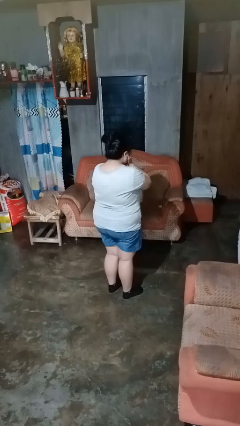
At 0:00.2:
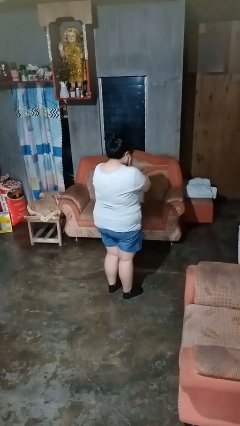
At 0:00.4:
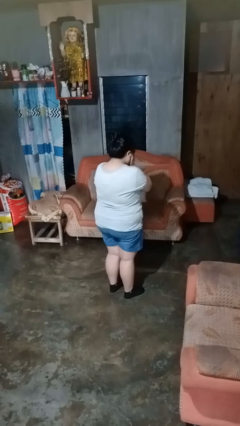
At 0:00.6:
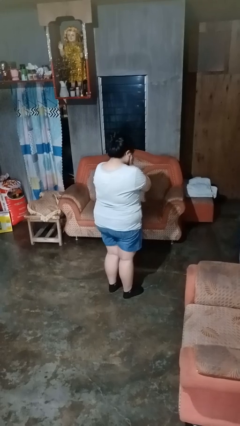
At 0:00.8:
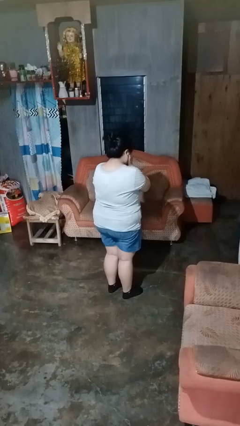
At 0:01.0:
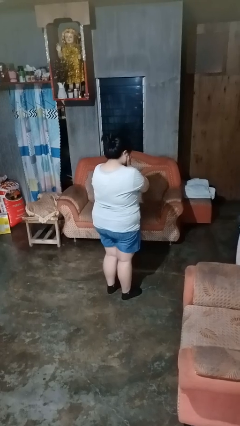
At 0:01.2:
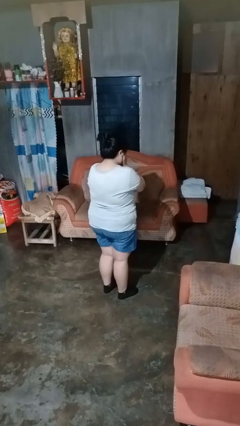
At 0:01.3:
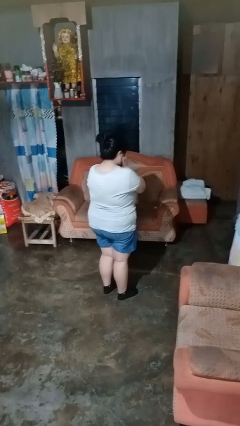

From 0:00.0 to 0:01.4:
person covers face with hands

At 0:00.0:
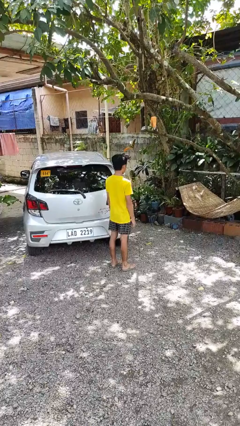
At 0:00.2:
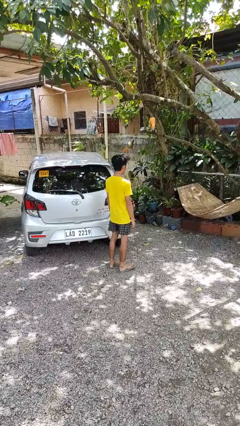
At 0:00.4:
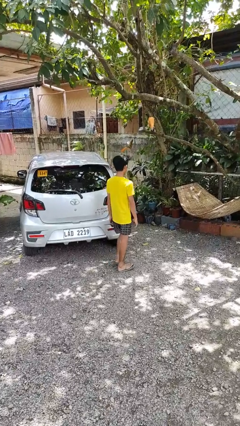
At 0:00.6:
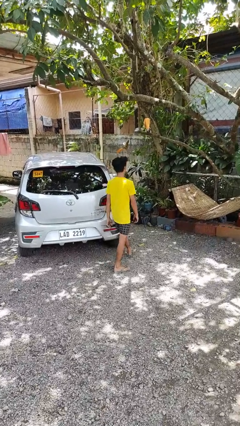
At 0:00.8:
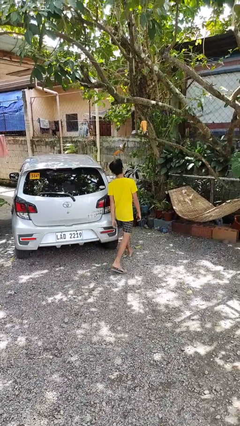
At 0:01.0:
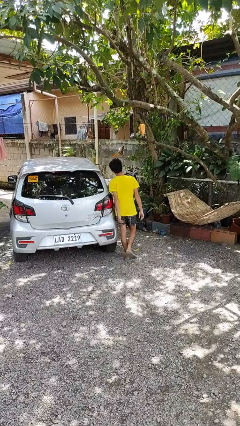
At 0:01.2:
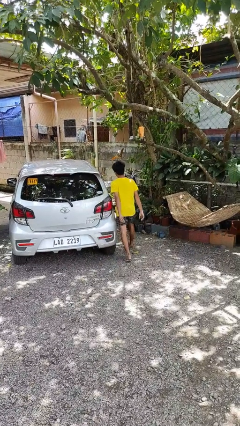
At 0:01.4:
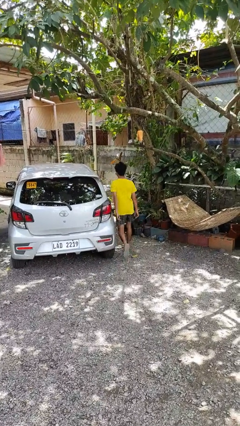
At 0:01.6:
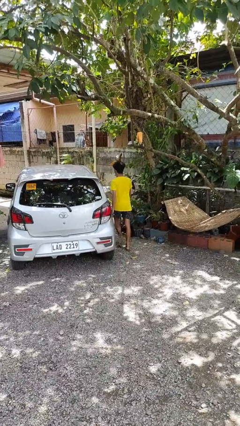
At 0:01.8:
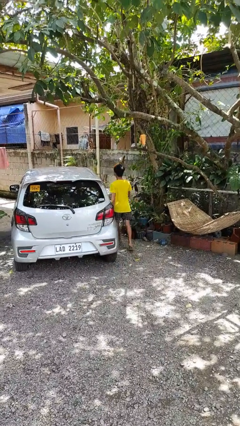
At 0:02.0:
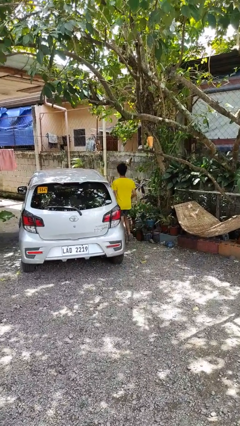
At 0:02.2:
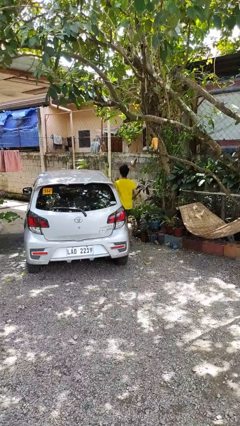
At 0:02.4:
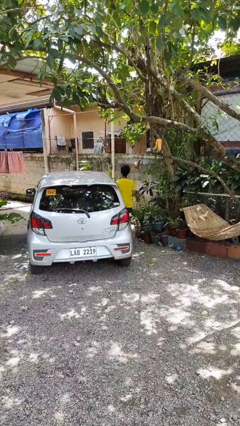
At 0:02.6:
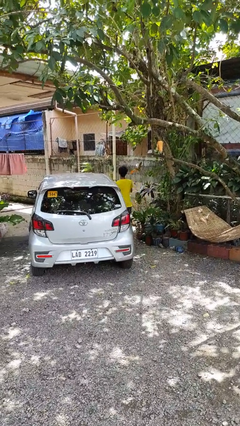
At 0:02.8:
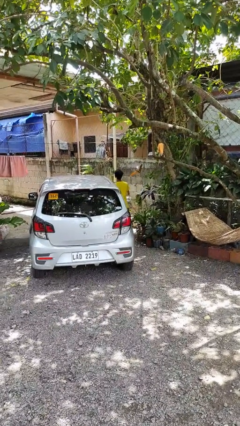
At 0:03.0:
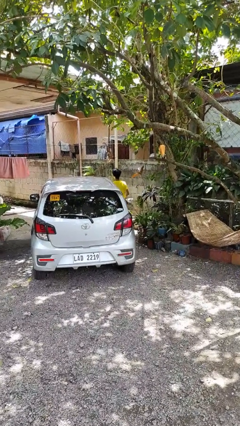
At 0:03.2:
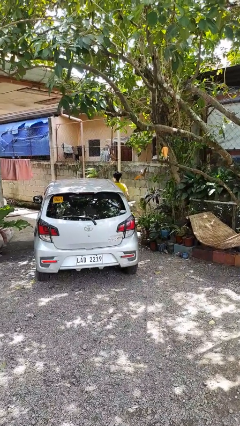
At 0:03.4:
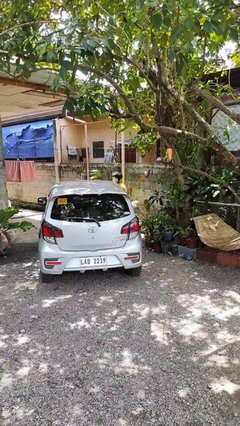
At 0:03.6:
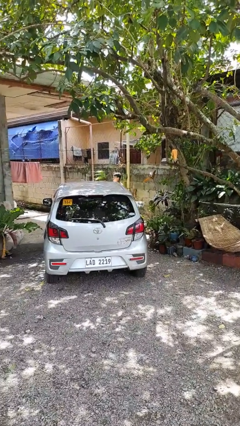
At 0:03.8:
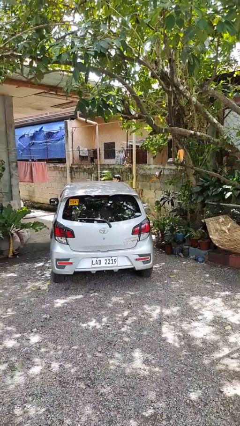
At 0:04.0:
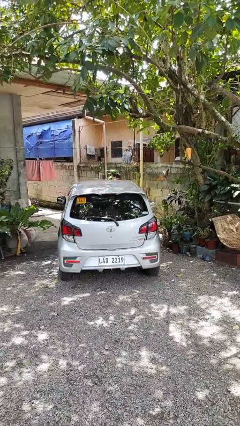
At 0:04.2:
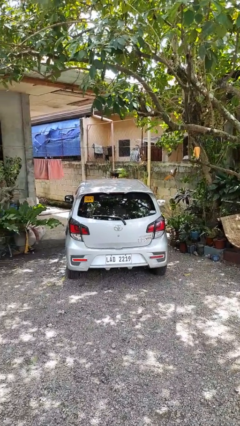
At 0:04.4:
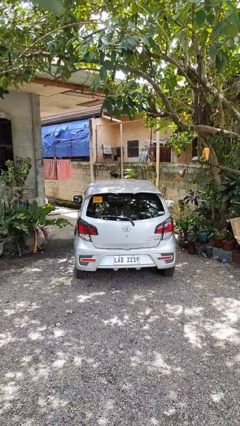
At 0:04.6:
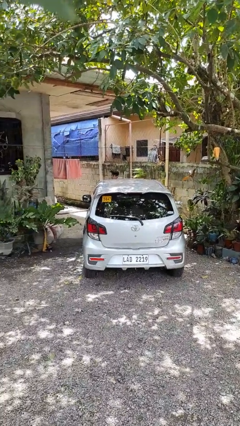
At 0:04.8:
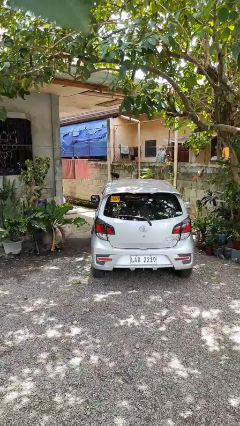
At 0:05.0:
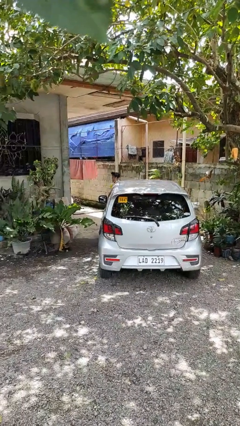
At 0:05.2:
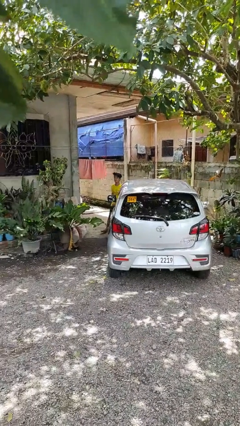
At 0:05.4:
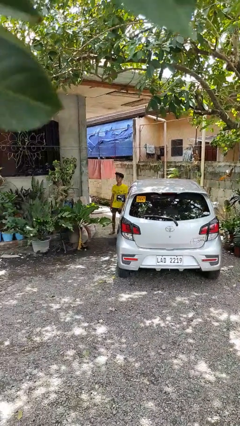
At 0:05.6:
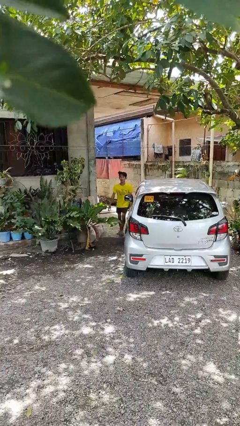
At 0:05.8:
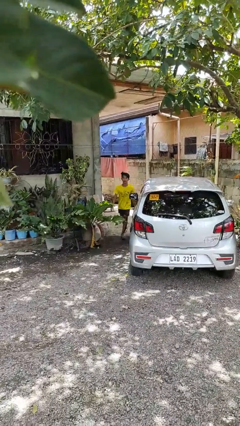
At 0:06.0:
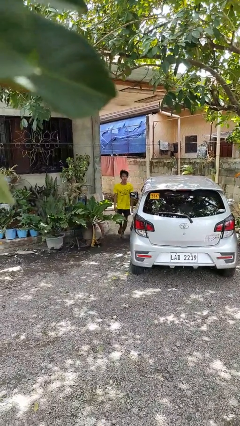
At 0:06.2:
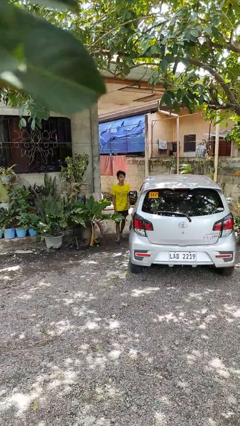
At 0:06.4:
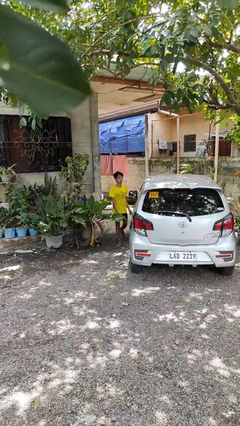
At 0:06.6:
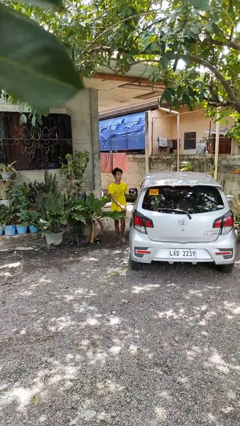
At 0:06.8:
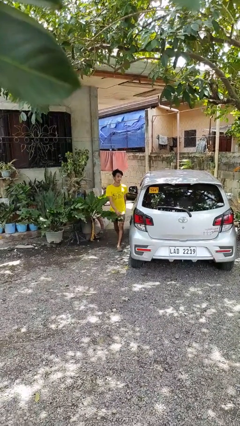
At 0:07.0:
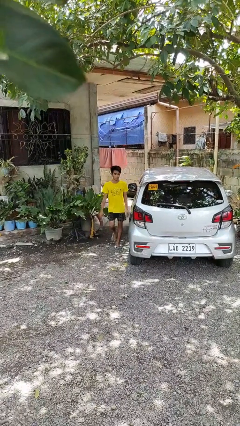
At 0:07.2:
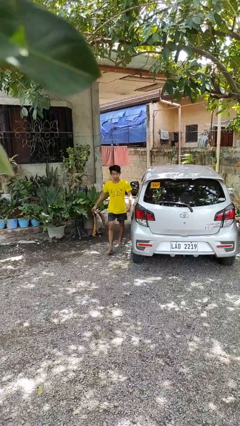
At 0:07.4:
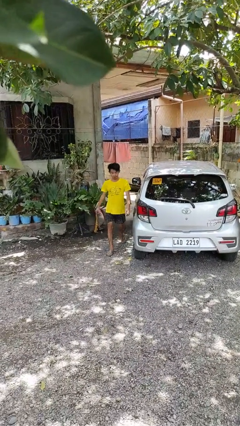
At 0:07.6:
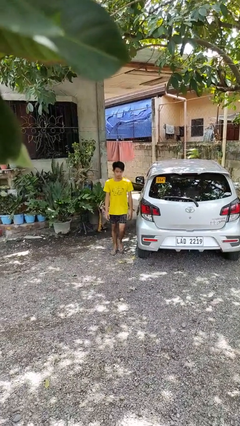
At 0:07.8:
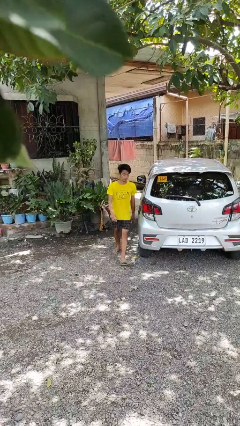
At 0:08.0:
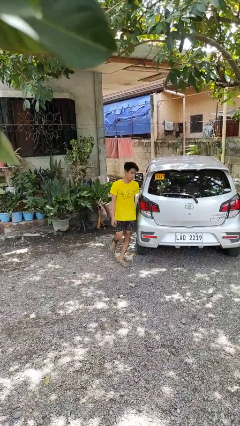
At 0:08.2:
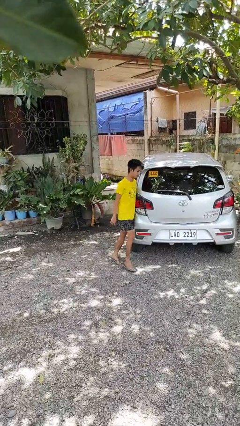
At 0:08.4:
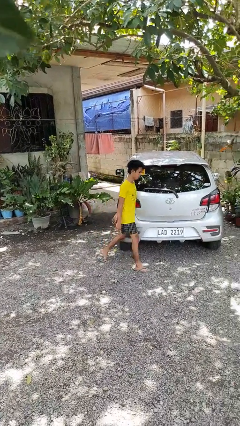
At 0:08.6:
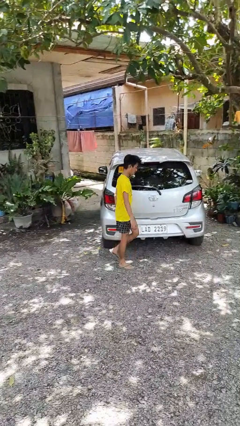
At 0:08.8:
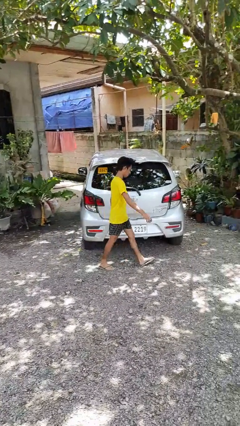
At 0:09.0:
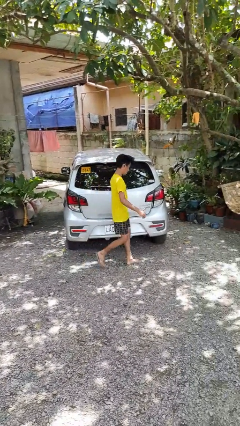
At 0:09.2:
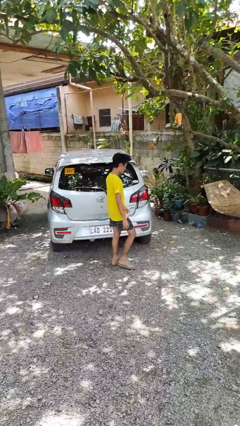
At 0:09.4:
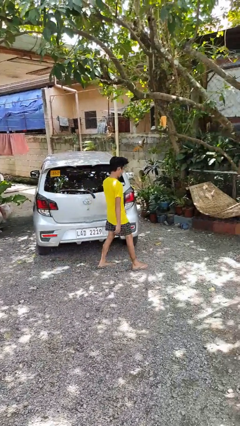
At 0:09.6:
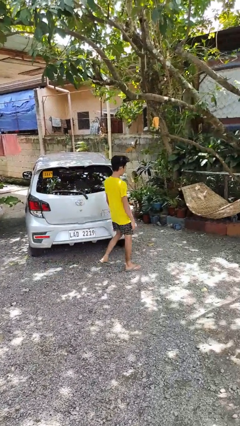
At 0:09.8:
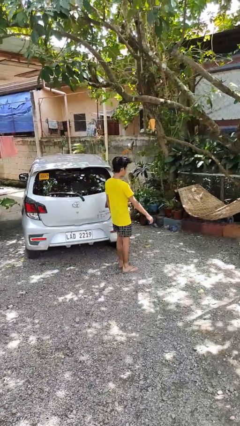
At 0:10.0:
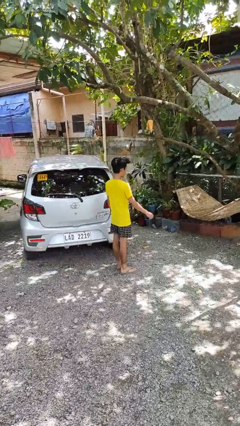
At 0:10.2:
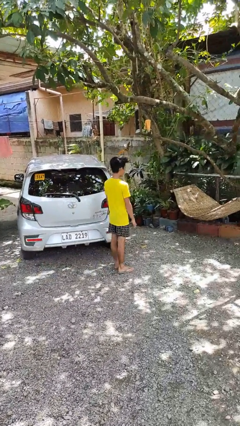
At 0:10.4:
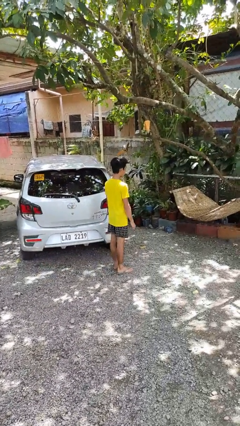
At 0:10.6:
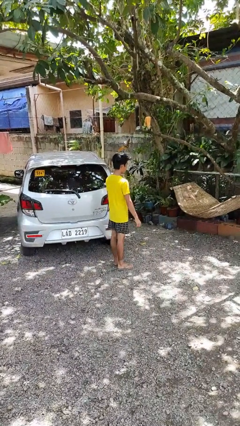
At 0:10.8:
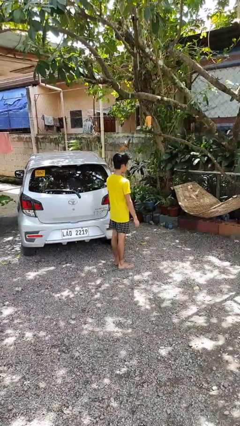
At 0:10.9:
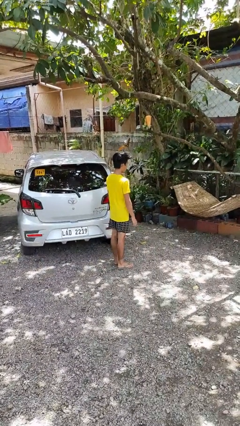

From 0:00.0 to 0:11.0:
person walks around car

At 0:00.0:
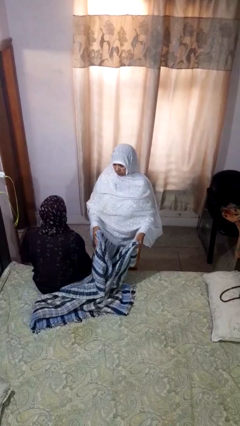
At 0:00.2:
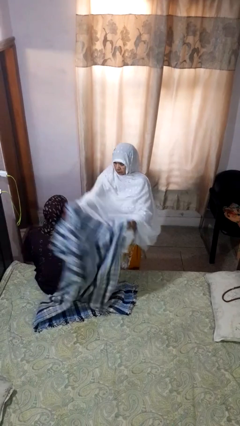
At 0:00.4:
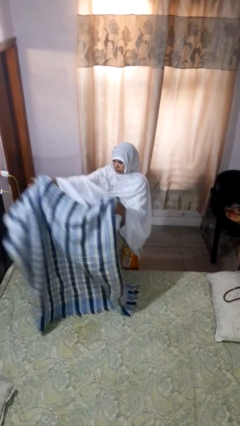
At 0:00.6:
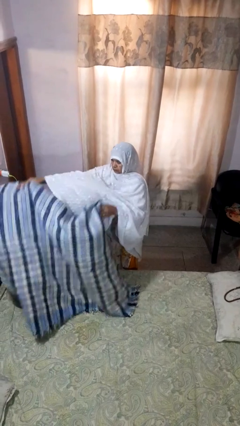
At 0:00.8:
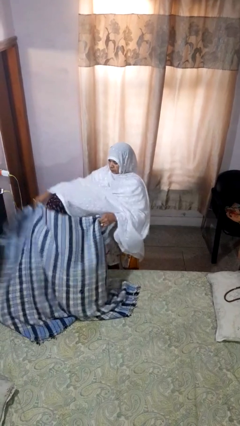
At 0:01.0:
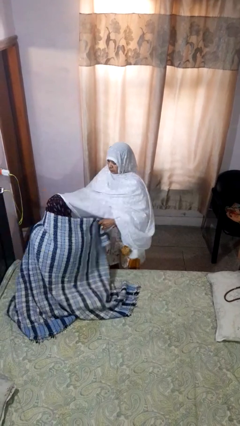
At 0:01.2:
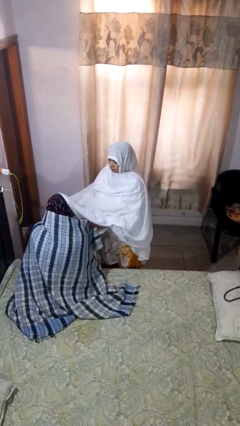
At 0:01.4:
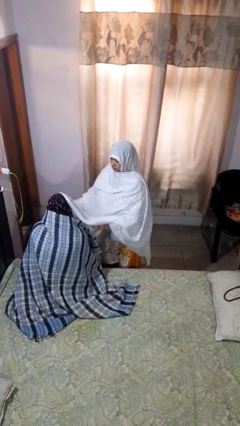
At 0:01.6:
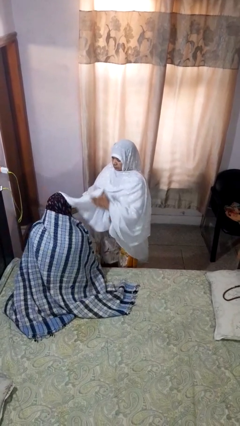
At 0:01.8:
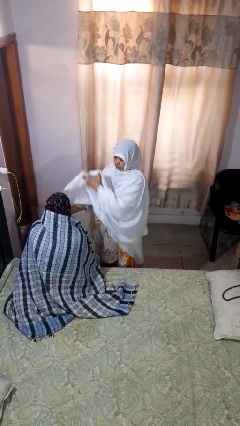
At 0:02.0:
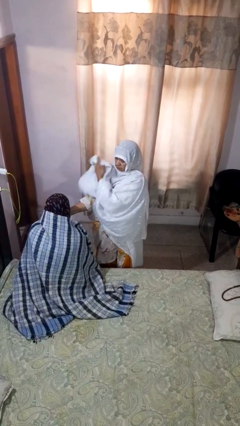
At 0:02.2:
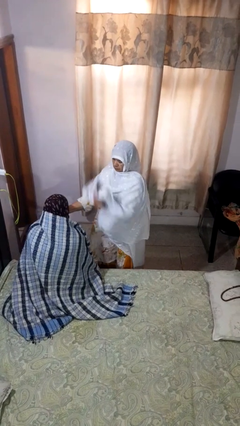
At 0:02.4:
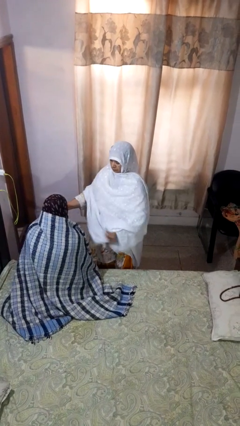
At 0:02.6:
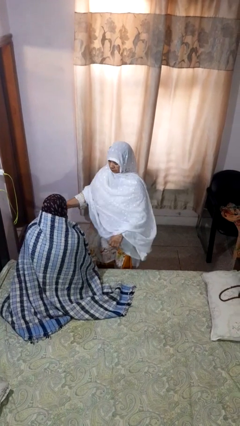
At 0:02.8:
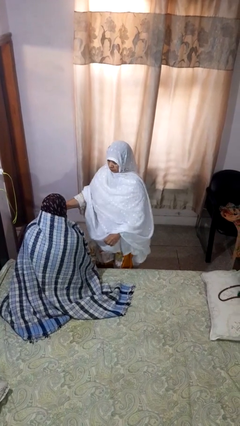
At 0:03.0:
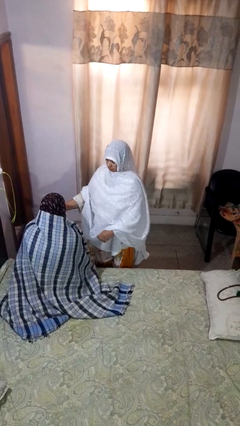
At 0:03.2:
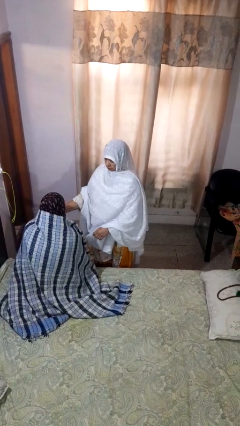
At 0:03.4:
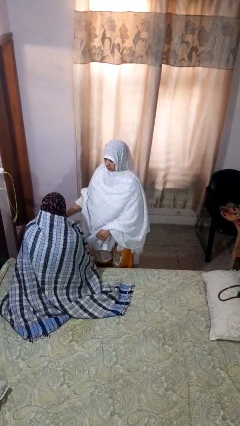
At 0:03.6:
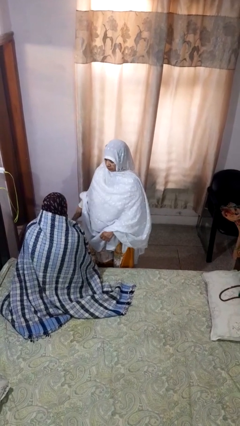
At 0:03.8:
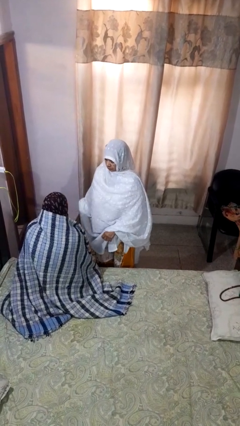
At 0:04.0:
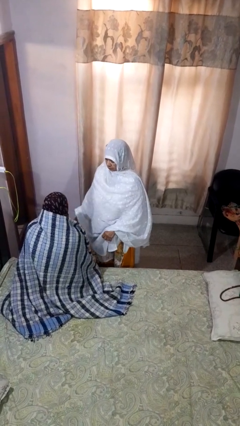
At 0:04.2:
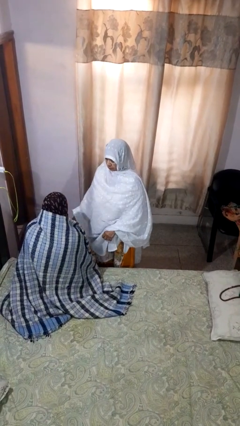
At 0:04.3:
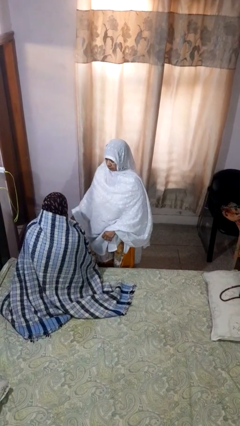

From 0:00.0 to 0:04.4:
person covers friend with blanket

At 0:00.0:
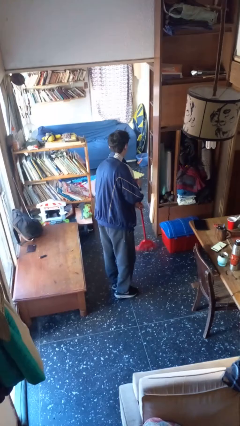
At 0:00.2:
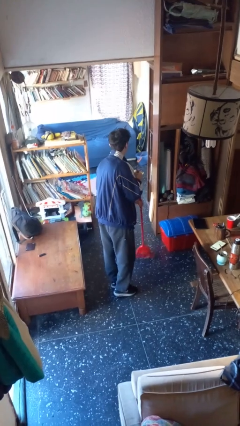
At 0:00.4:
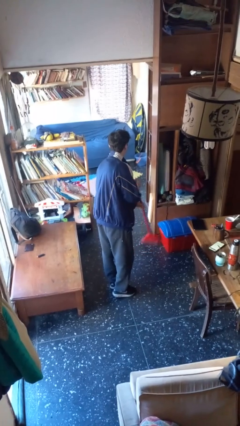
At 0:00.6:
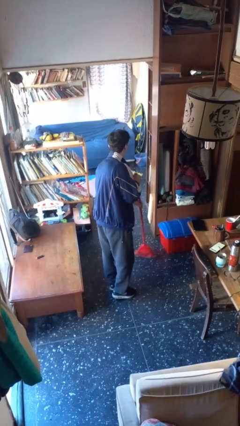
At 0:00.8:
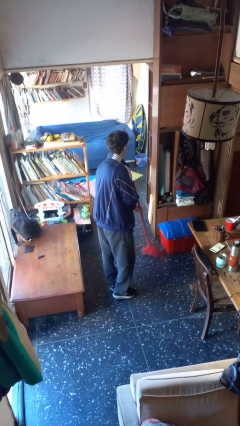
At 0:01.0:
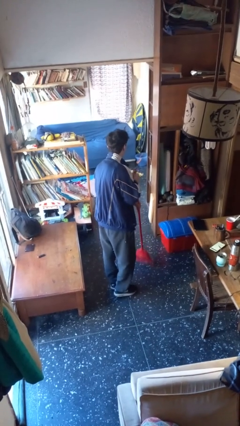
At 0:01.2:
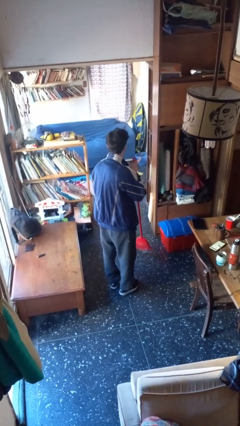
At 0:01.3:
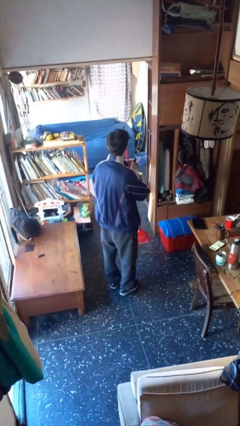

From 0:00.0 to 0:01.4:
person sweeps floor
